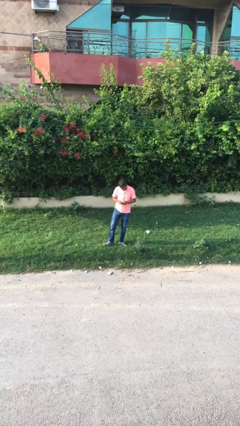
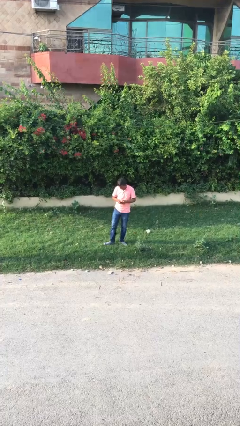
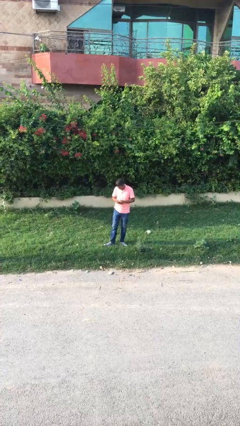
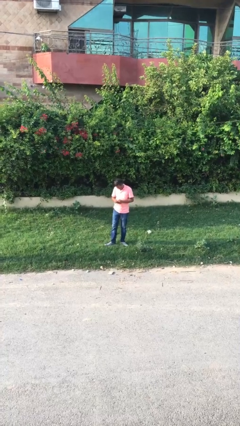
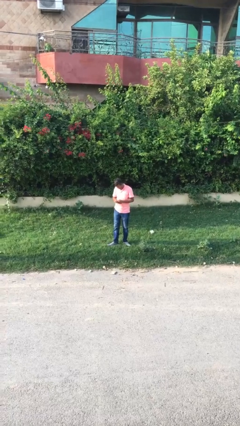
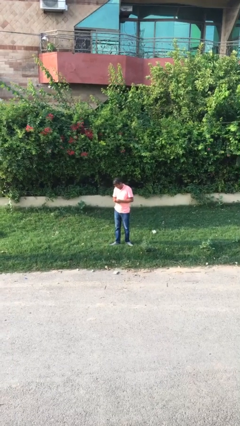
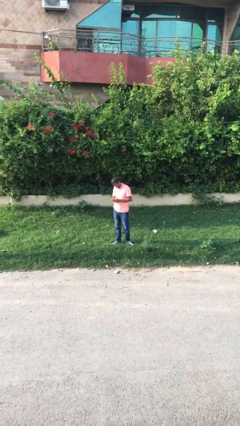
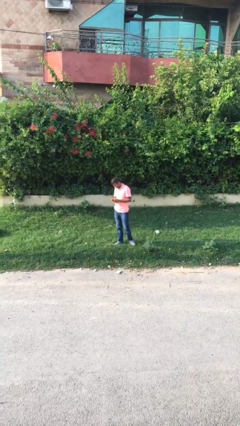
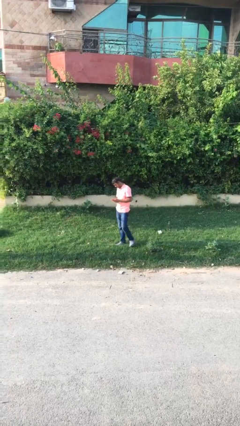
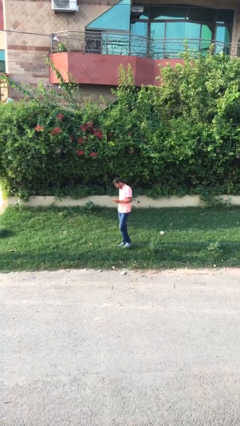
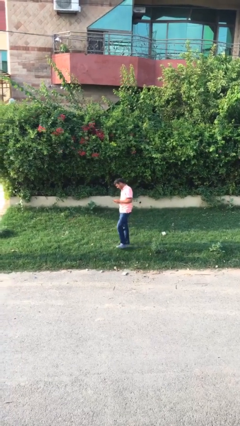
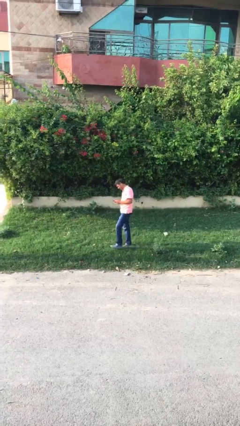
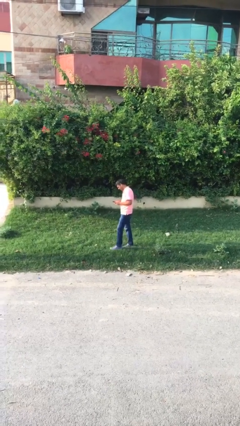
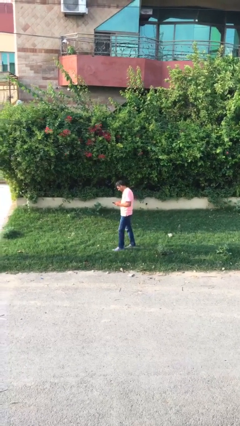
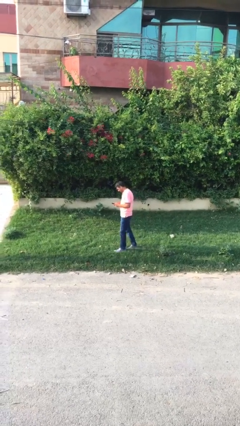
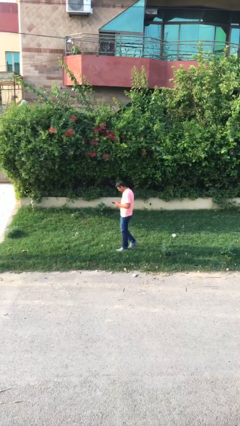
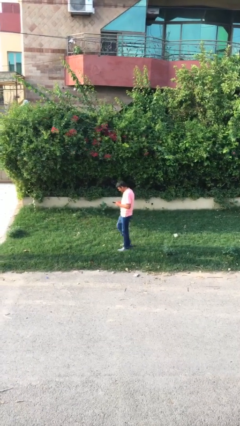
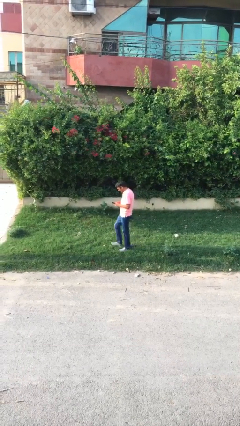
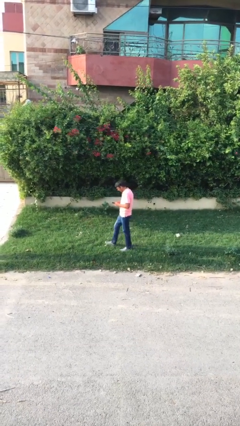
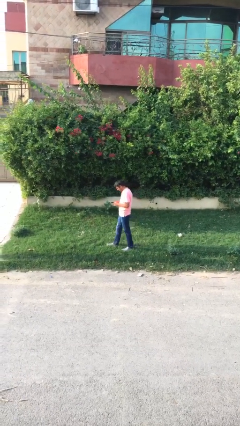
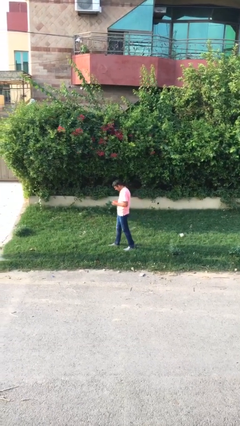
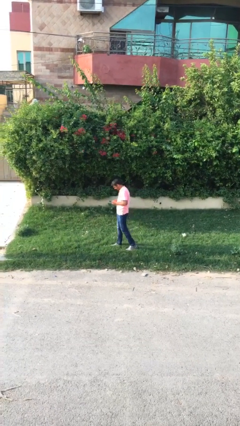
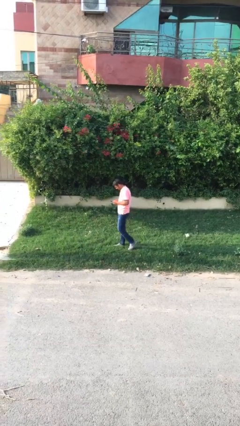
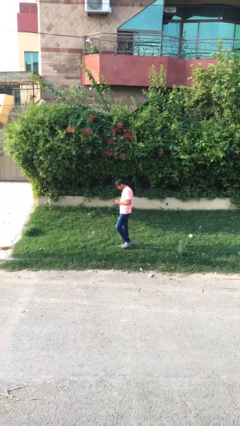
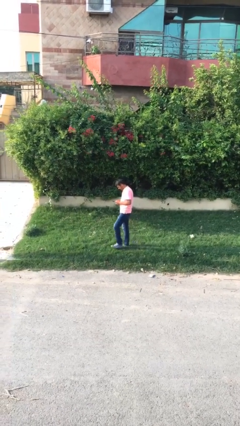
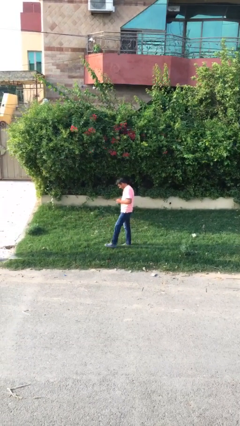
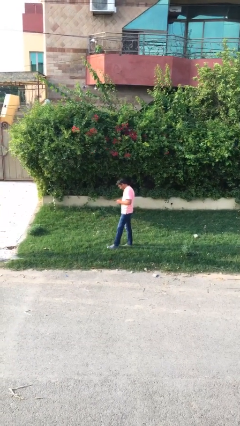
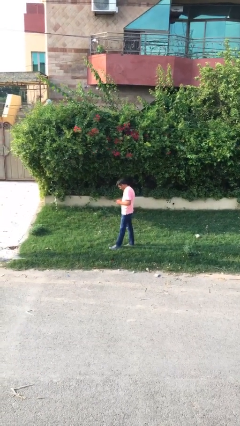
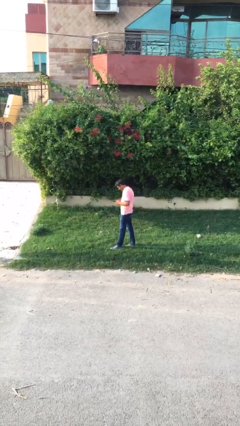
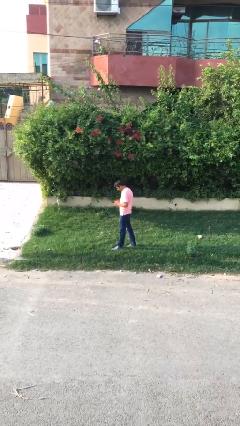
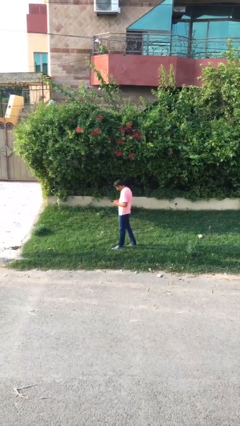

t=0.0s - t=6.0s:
person texts on phone

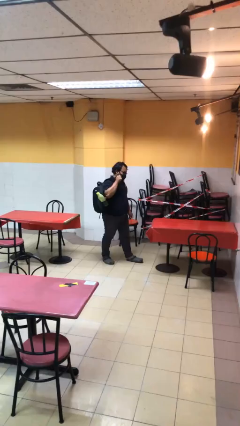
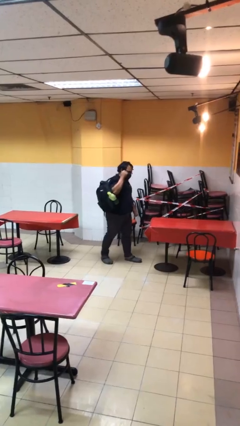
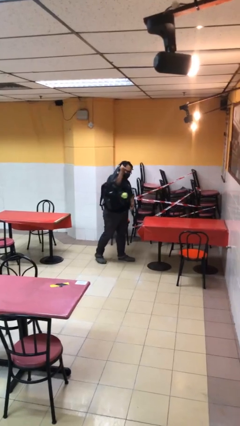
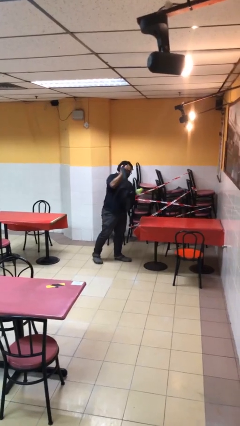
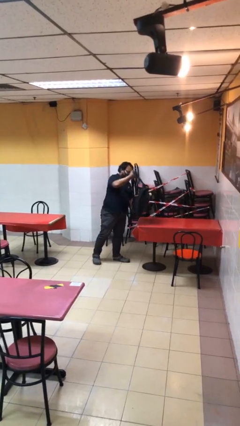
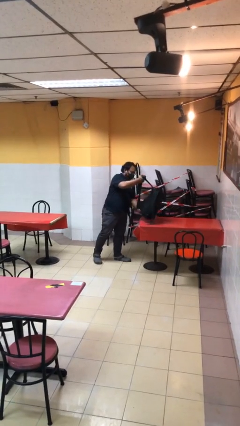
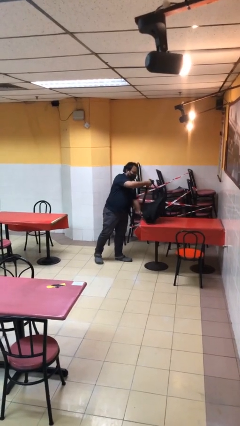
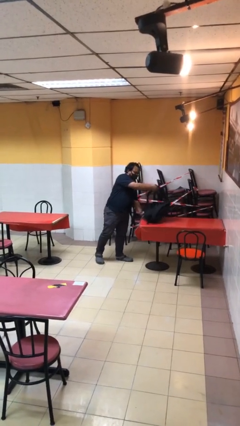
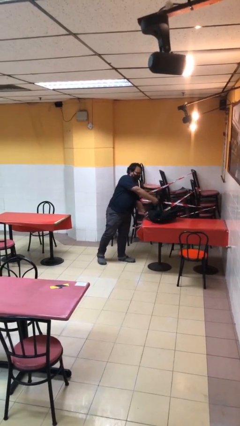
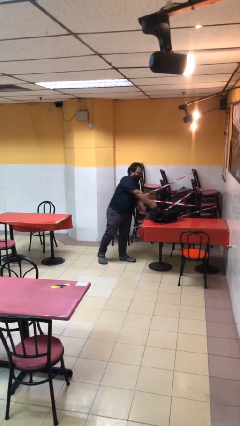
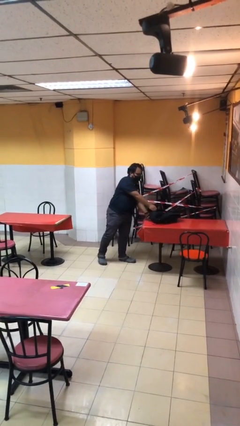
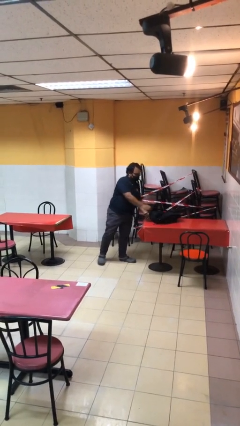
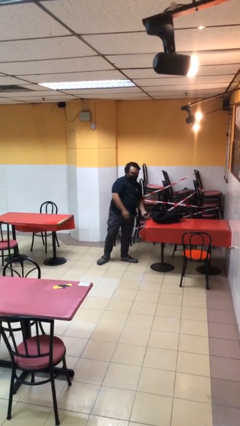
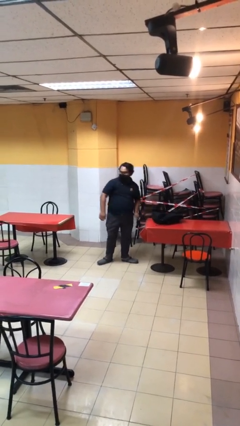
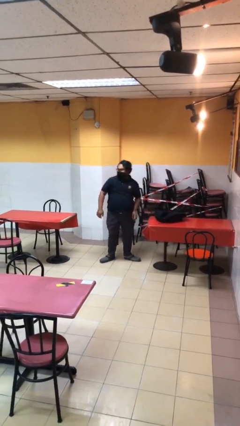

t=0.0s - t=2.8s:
person puts down object on table

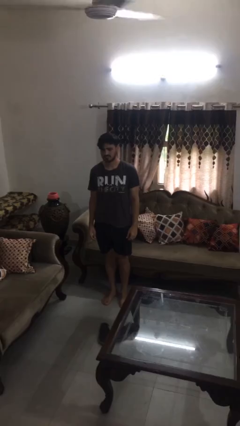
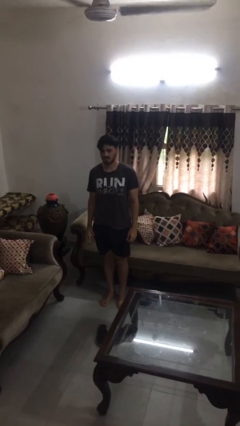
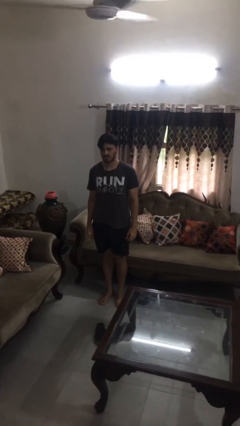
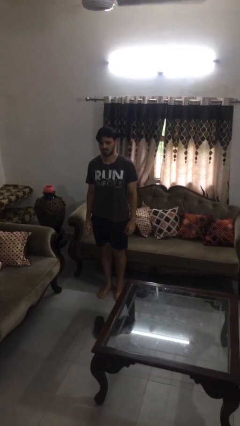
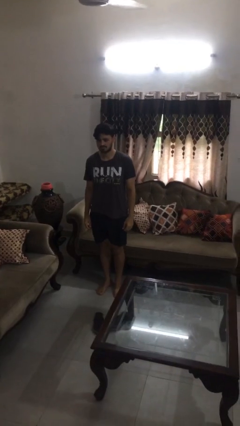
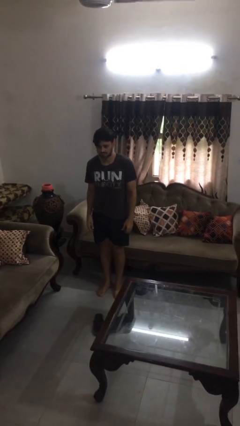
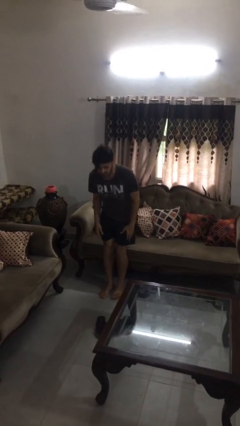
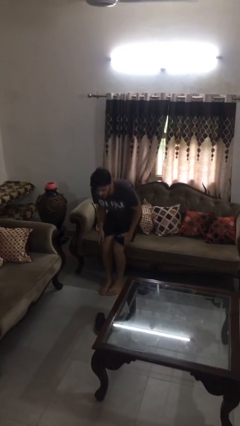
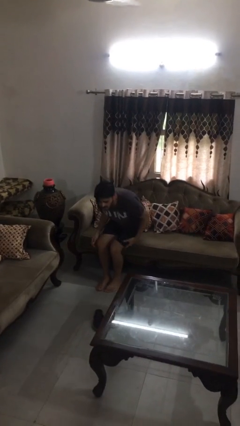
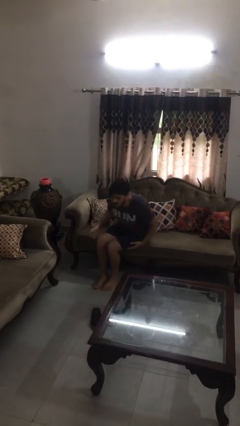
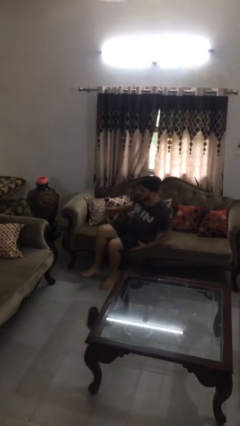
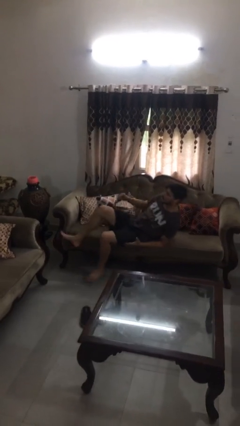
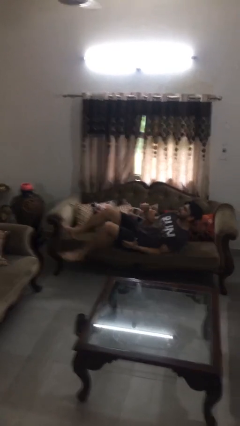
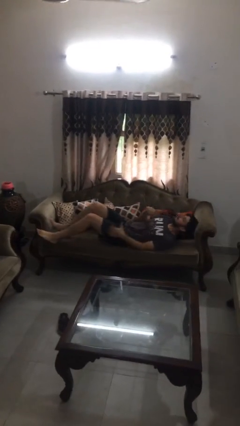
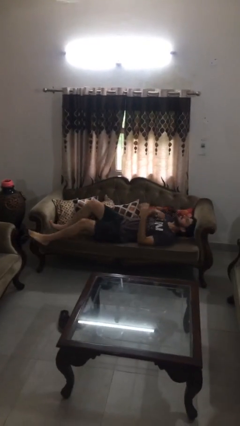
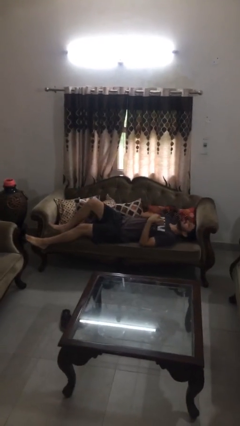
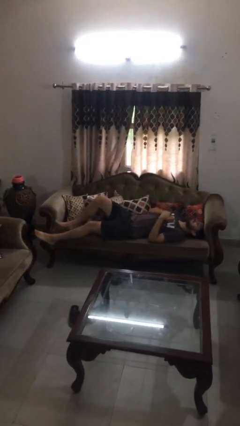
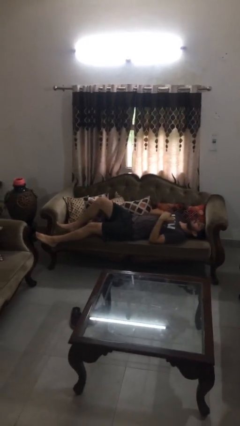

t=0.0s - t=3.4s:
person lies down on couch

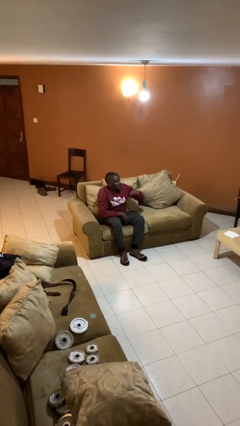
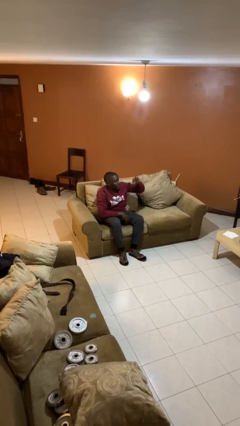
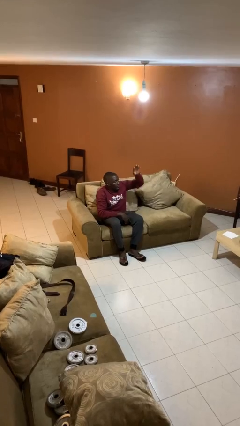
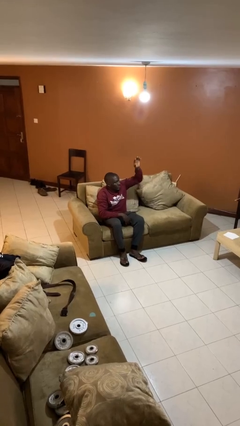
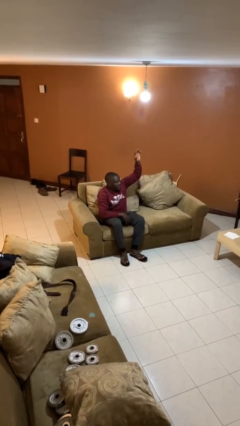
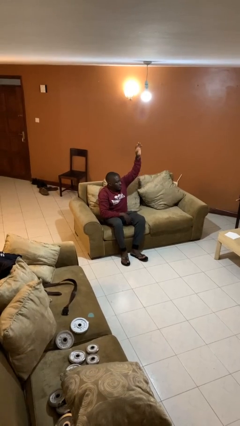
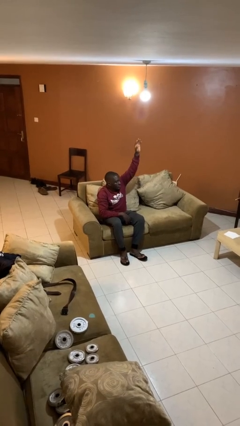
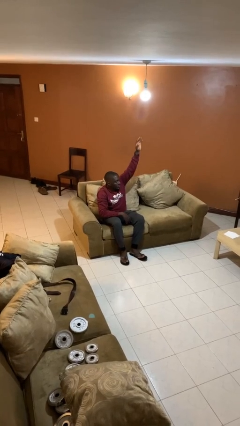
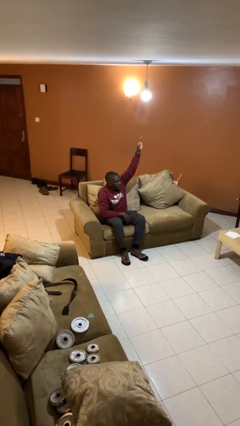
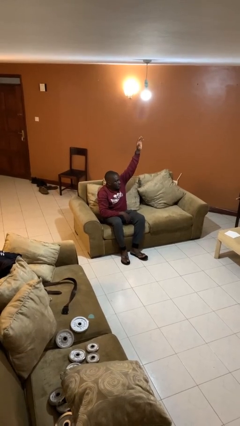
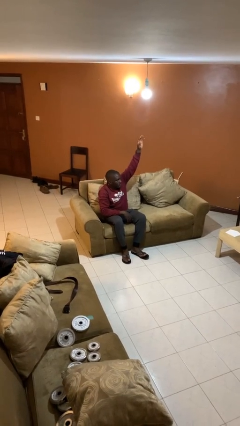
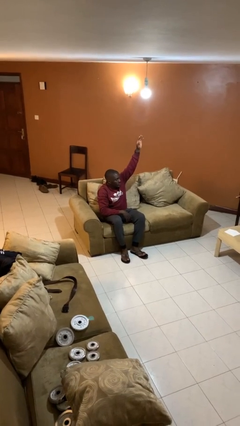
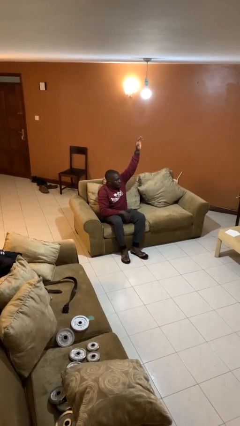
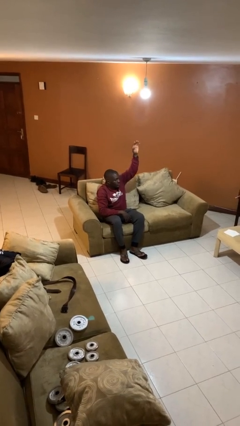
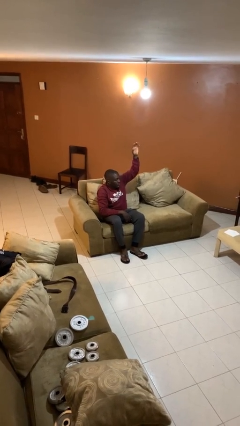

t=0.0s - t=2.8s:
person gestures raise hand

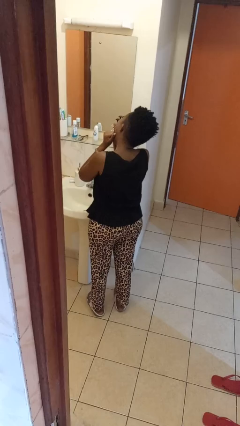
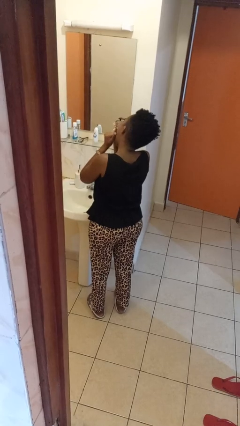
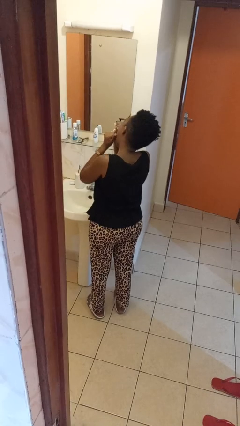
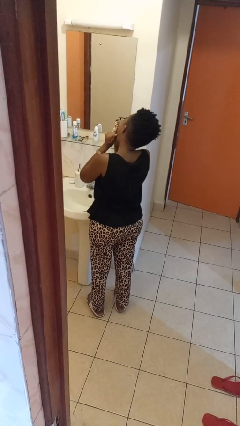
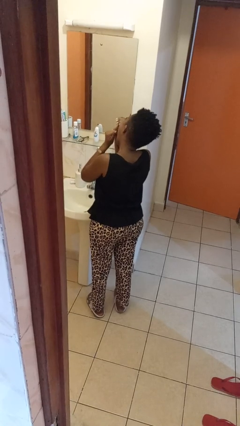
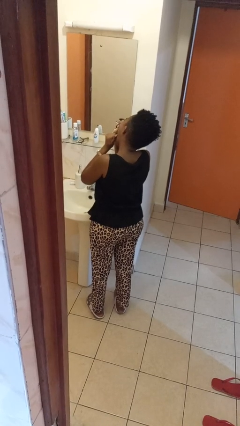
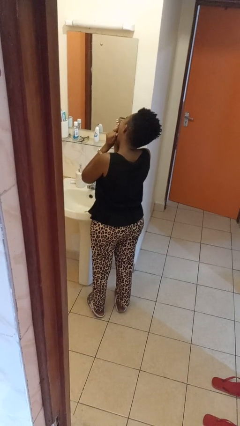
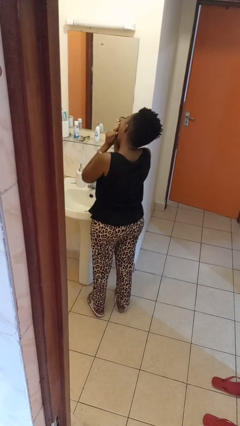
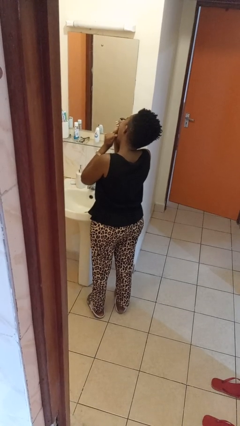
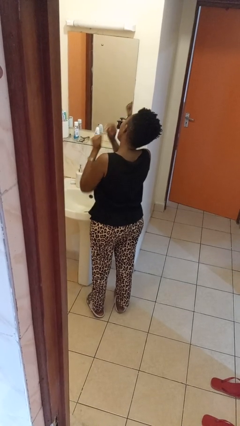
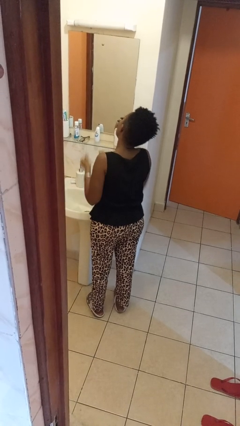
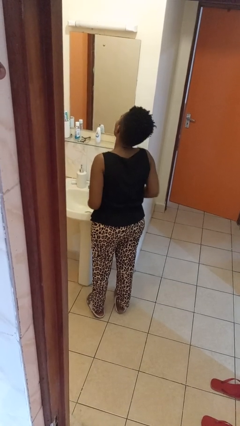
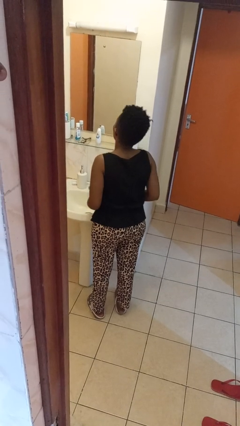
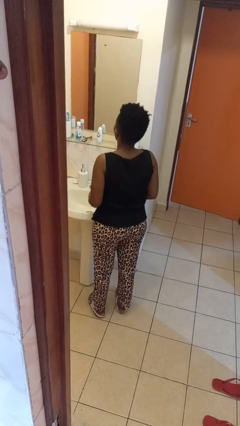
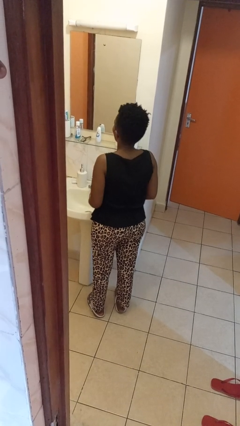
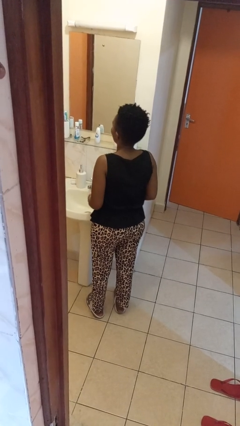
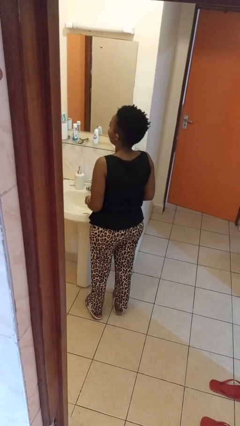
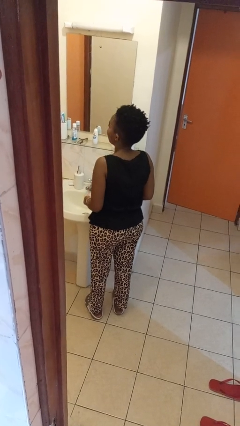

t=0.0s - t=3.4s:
person flosses
